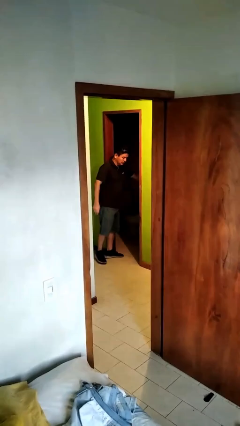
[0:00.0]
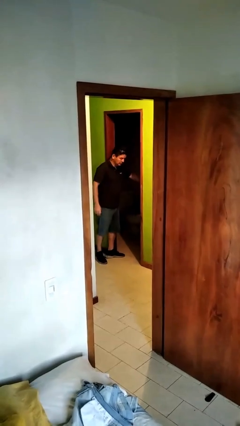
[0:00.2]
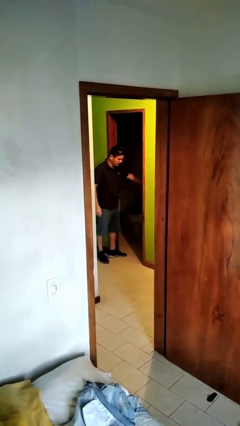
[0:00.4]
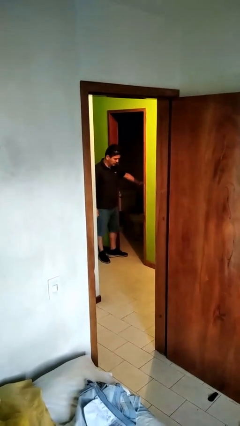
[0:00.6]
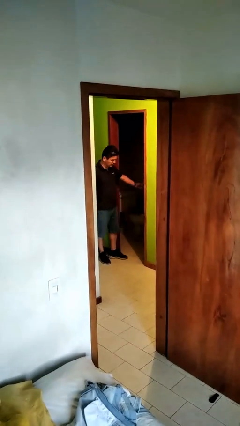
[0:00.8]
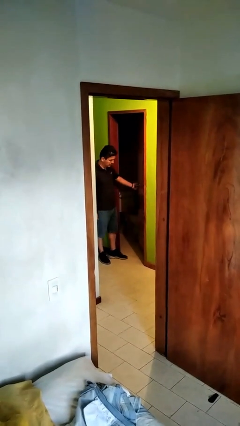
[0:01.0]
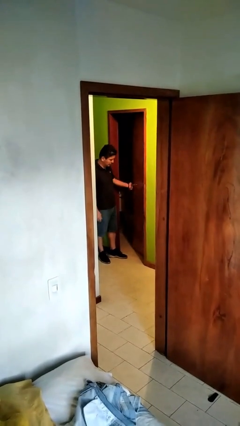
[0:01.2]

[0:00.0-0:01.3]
person closes facility door

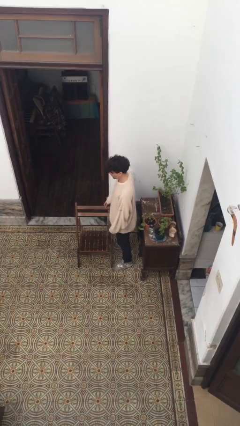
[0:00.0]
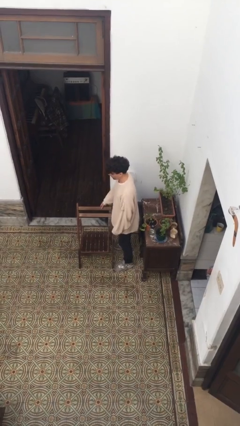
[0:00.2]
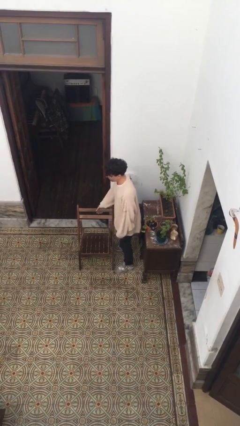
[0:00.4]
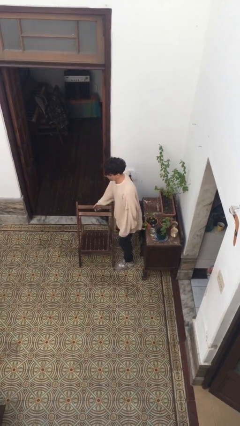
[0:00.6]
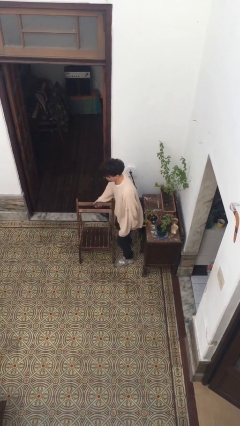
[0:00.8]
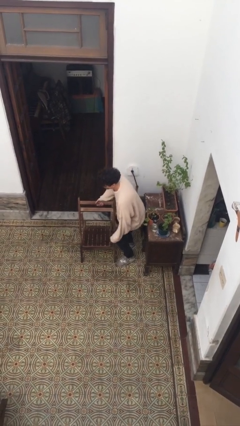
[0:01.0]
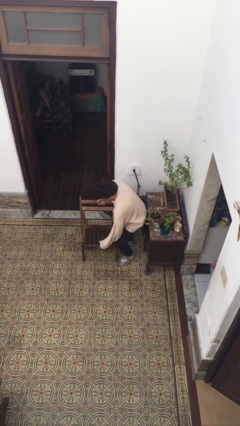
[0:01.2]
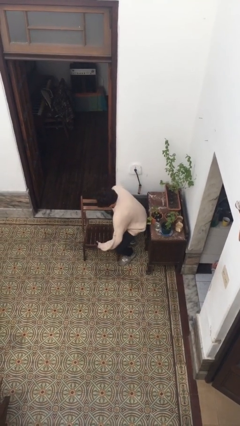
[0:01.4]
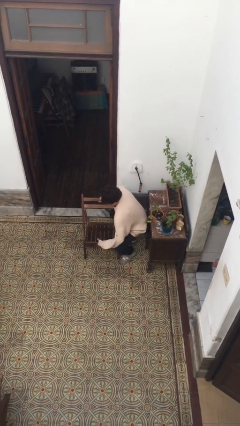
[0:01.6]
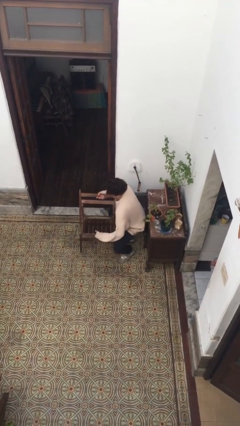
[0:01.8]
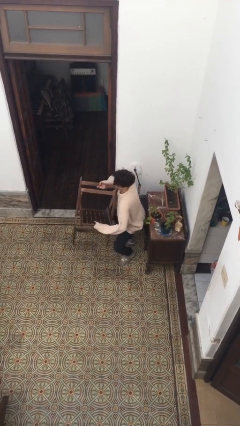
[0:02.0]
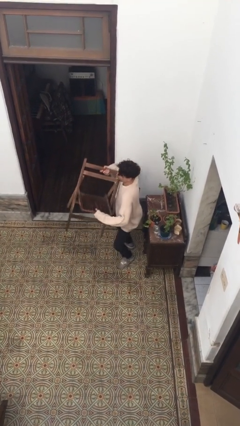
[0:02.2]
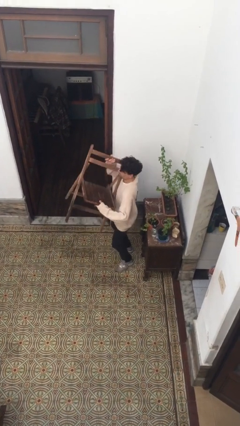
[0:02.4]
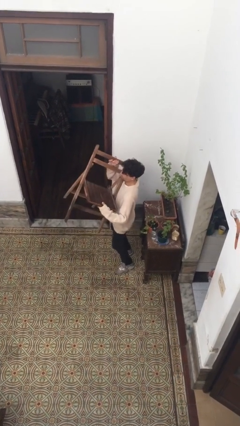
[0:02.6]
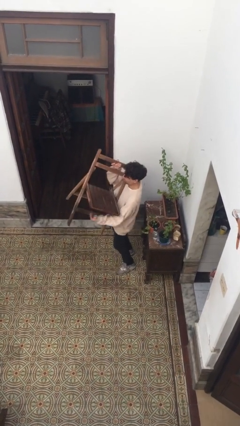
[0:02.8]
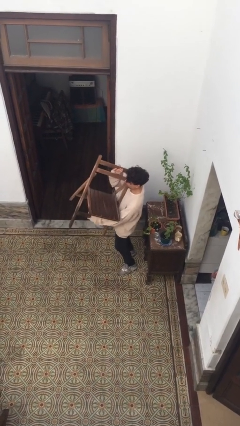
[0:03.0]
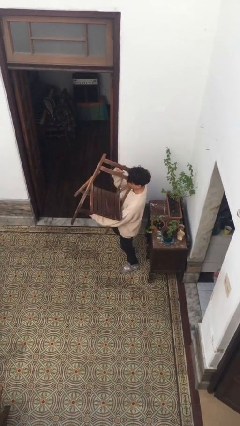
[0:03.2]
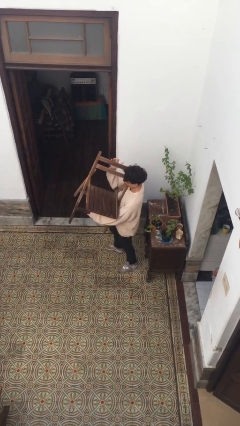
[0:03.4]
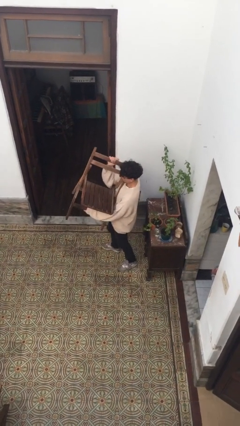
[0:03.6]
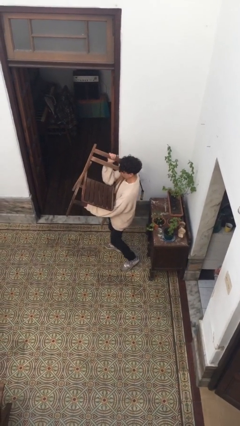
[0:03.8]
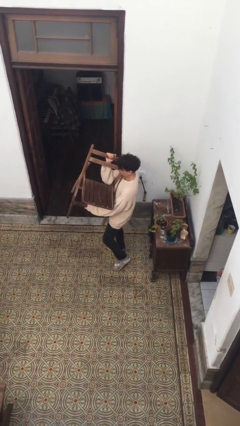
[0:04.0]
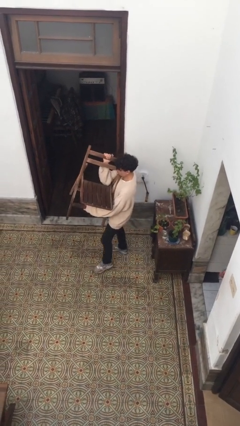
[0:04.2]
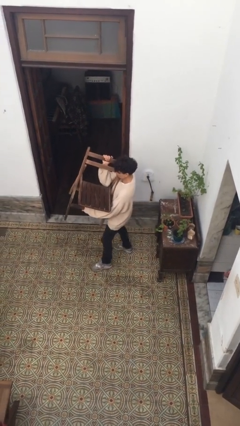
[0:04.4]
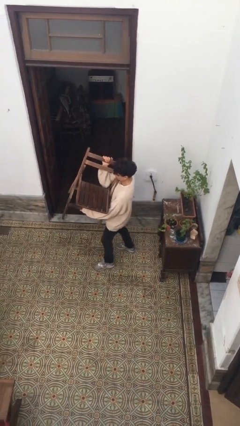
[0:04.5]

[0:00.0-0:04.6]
person picks up object from floor

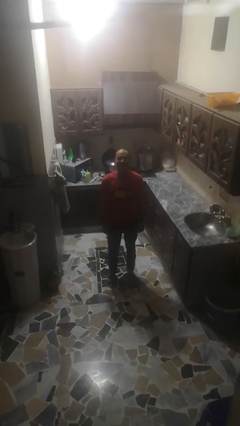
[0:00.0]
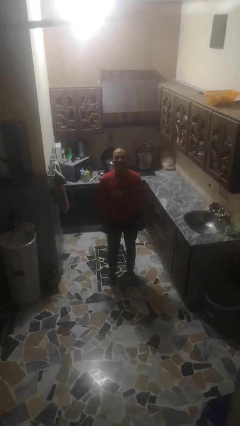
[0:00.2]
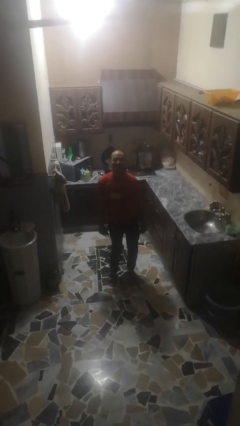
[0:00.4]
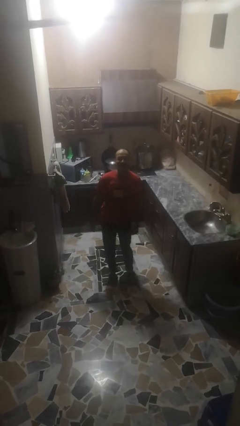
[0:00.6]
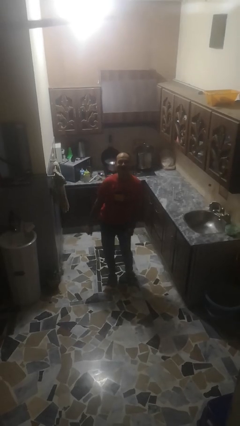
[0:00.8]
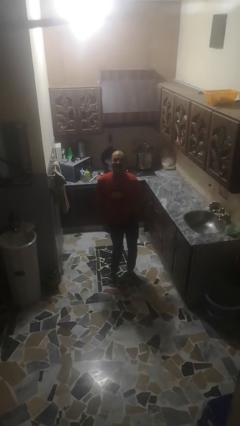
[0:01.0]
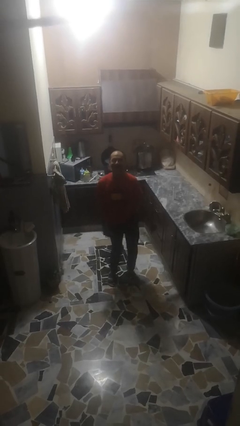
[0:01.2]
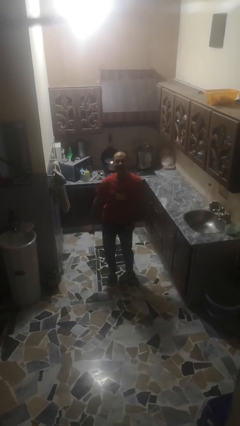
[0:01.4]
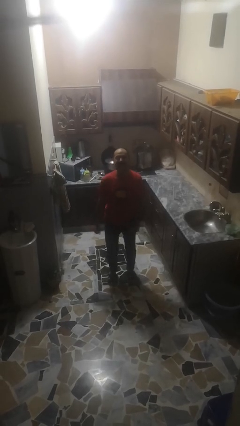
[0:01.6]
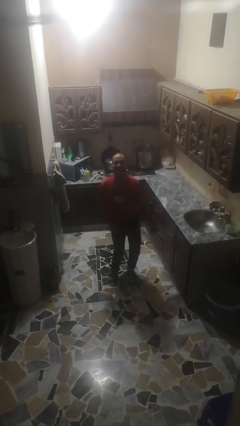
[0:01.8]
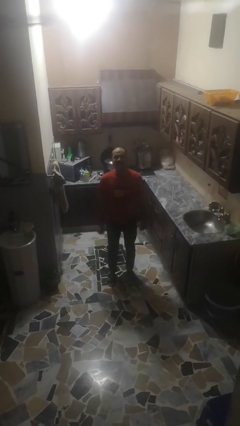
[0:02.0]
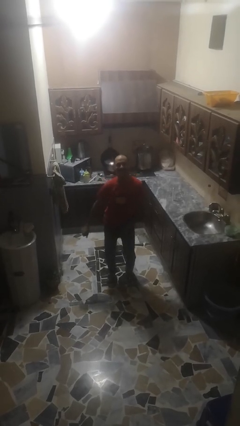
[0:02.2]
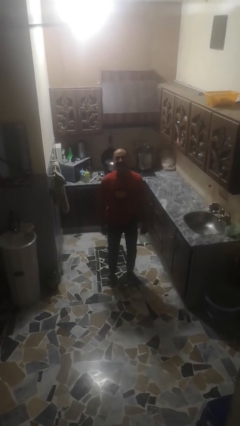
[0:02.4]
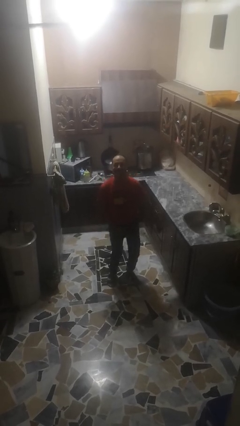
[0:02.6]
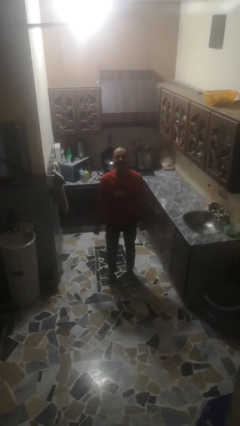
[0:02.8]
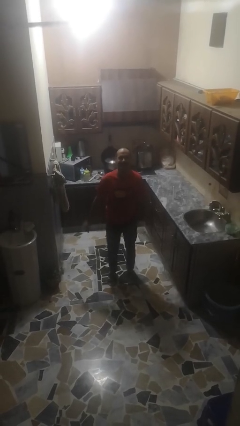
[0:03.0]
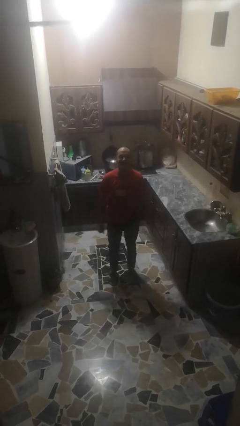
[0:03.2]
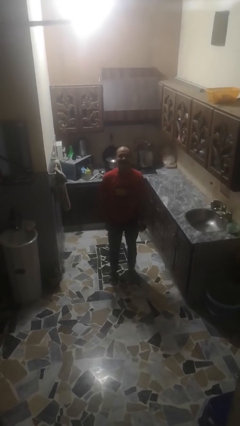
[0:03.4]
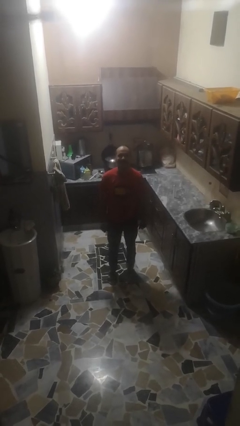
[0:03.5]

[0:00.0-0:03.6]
person wiggles hips

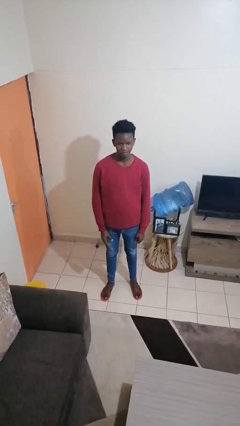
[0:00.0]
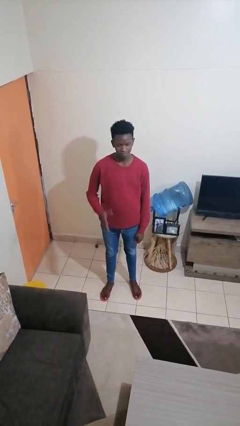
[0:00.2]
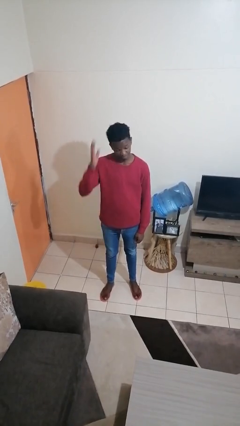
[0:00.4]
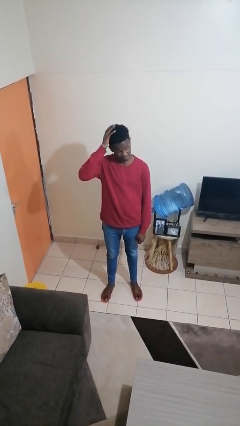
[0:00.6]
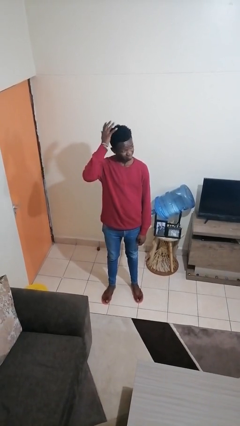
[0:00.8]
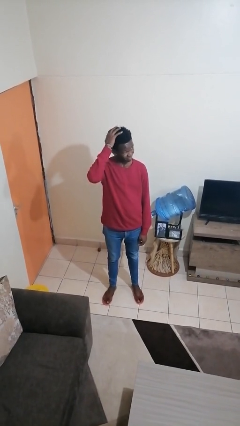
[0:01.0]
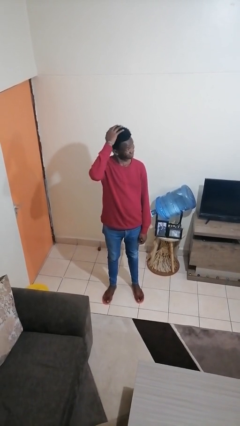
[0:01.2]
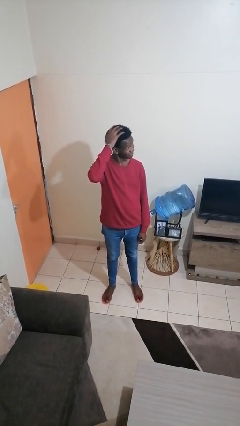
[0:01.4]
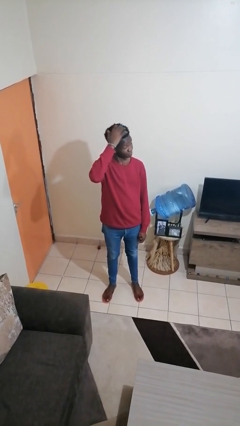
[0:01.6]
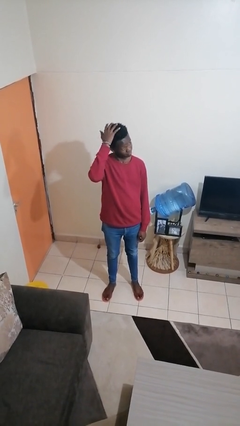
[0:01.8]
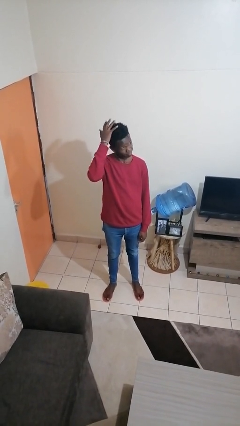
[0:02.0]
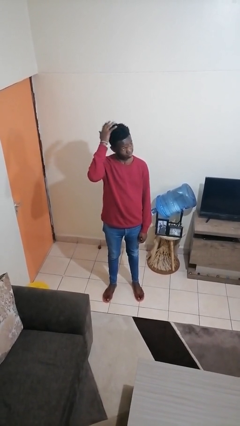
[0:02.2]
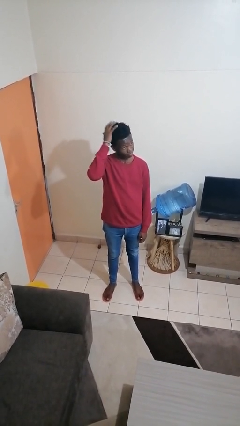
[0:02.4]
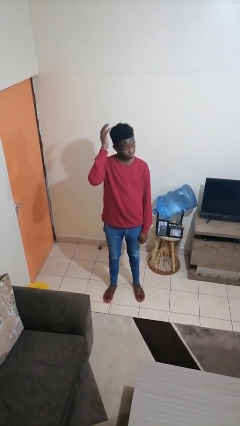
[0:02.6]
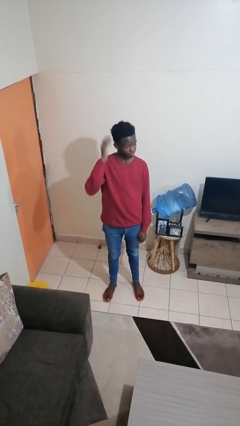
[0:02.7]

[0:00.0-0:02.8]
person pats head

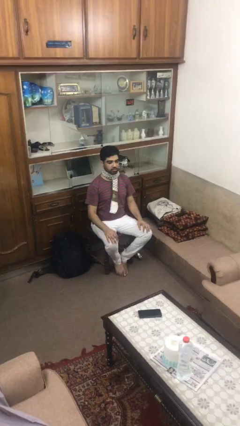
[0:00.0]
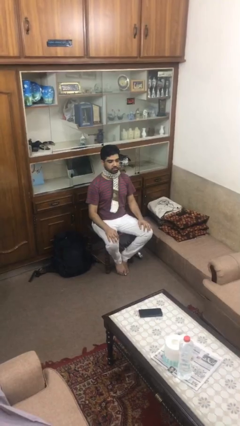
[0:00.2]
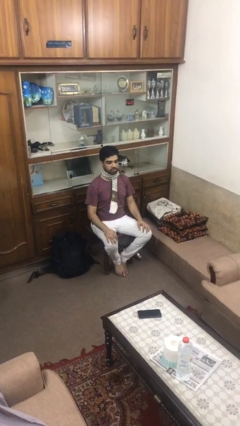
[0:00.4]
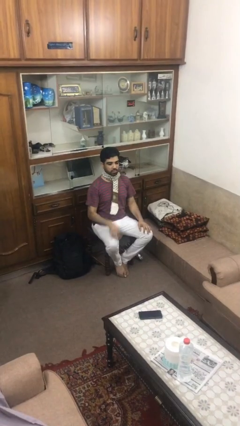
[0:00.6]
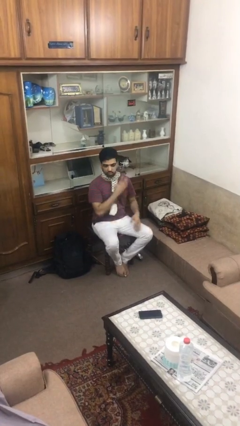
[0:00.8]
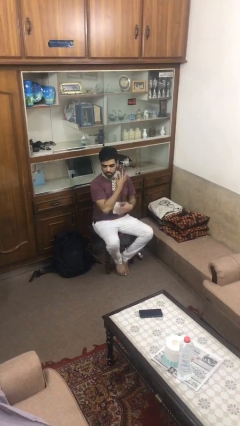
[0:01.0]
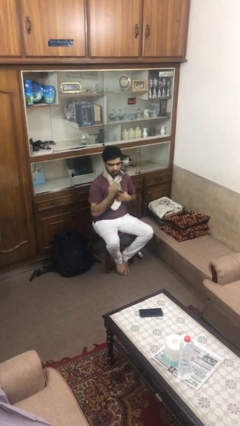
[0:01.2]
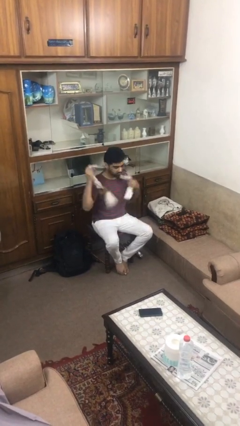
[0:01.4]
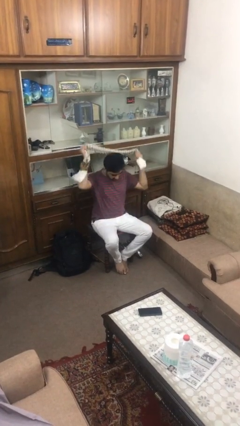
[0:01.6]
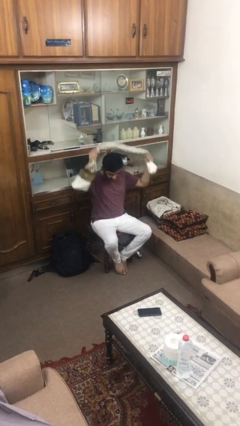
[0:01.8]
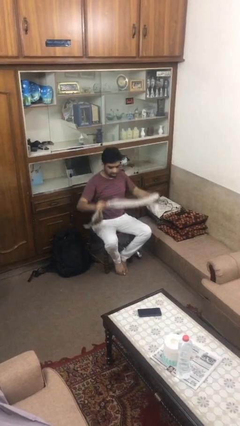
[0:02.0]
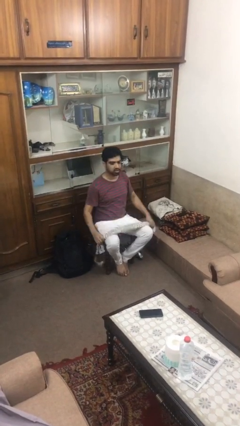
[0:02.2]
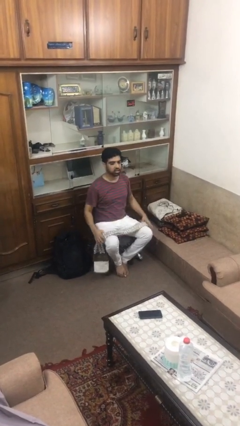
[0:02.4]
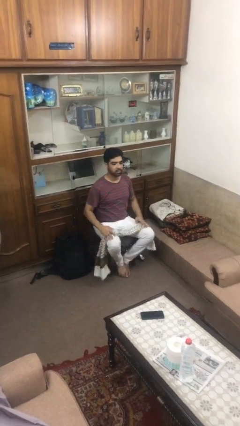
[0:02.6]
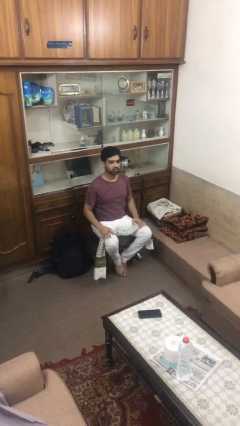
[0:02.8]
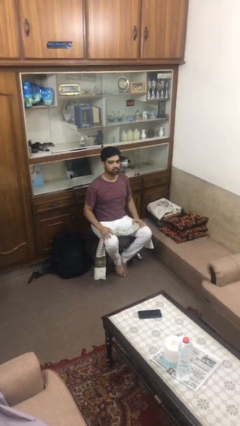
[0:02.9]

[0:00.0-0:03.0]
person takes off scarf

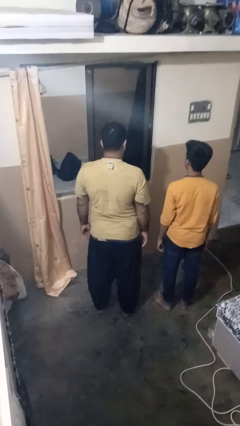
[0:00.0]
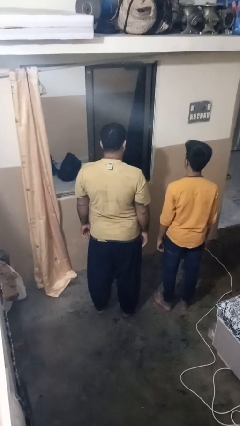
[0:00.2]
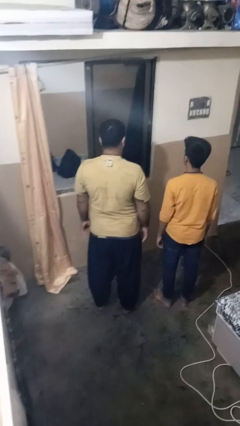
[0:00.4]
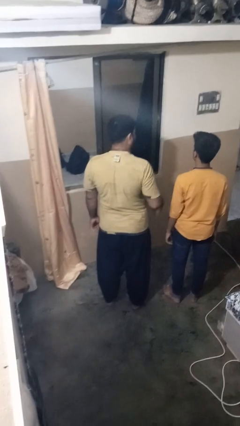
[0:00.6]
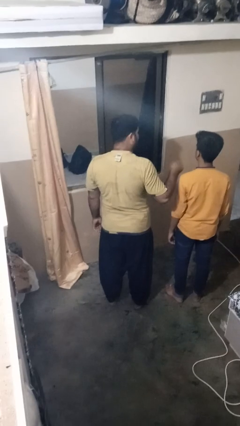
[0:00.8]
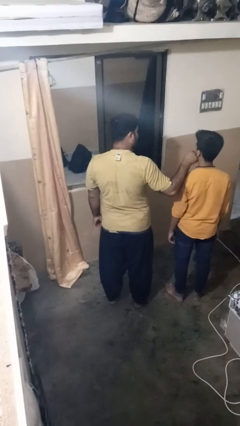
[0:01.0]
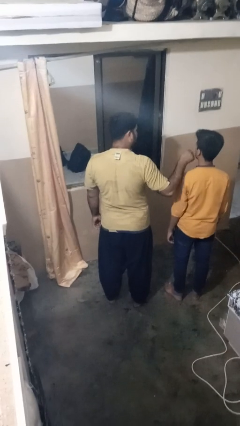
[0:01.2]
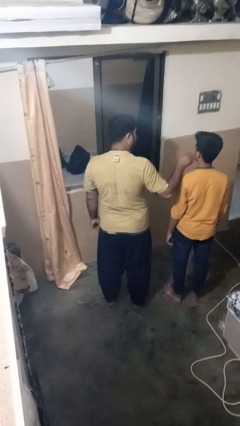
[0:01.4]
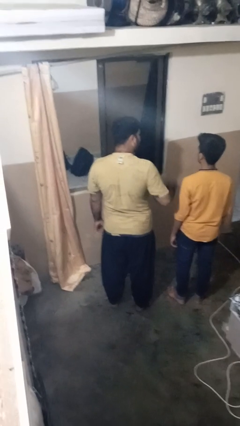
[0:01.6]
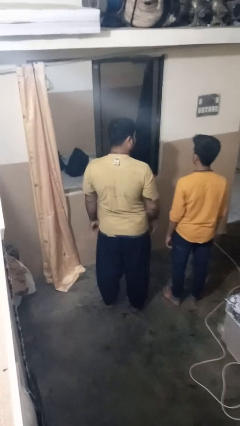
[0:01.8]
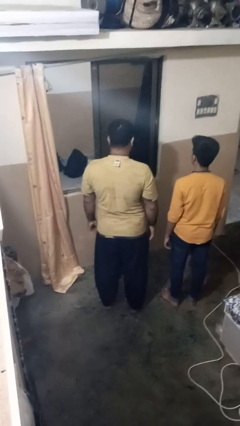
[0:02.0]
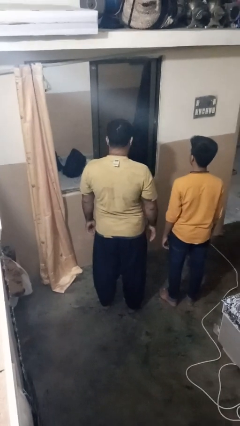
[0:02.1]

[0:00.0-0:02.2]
person touches face of person
